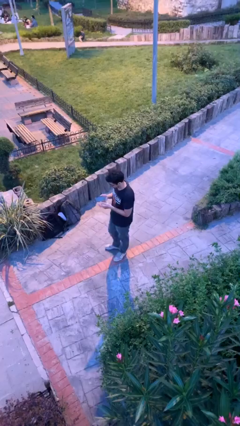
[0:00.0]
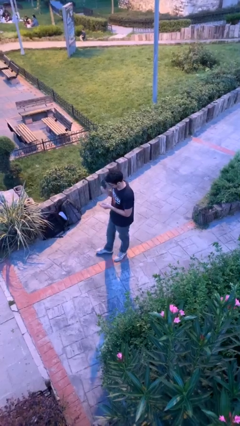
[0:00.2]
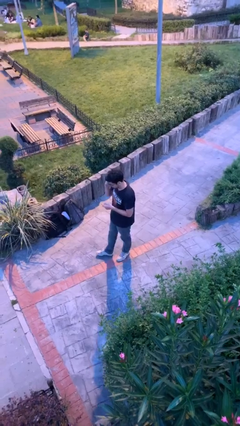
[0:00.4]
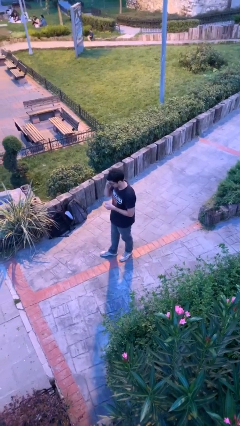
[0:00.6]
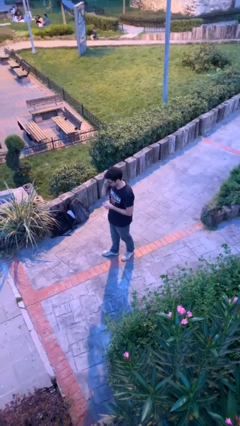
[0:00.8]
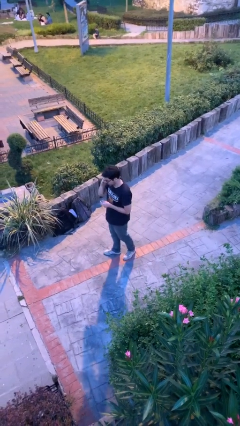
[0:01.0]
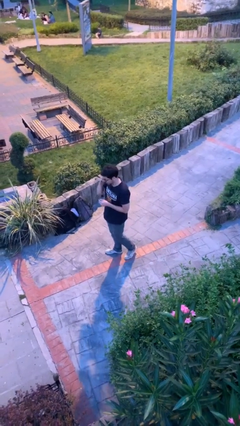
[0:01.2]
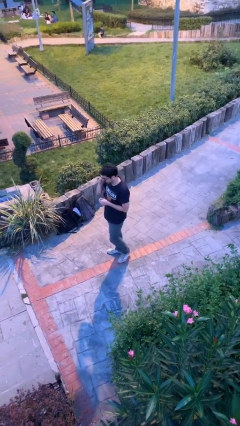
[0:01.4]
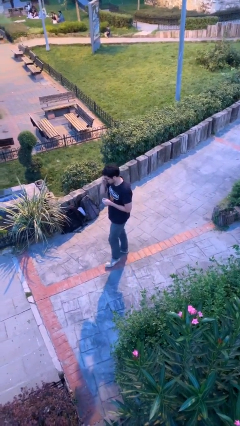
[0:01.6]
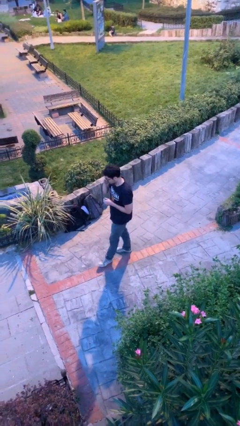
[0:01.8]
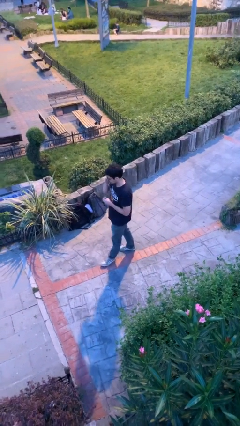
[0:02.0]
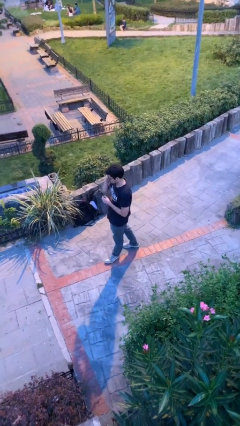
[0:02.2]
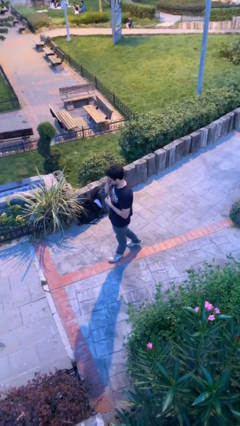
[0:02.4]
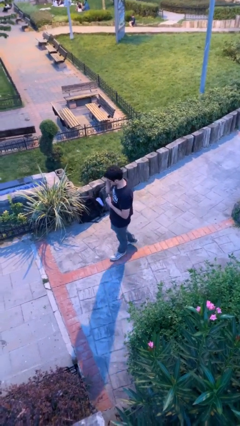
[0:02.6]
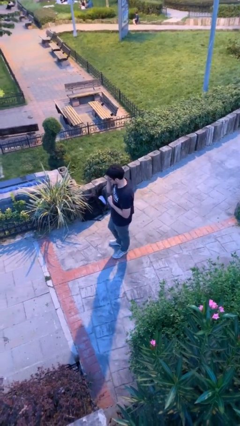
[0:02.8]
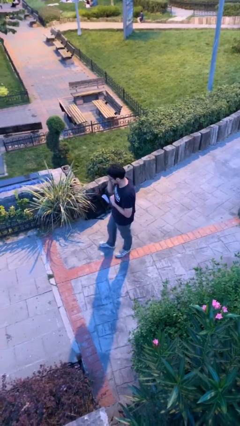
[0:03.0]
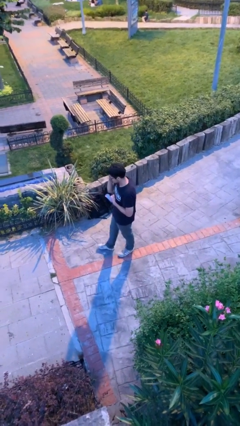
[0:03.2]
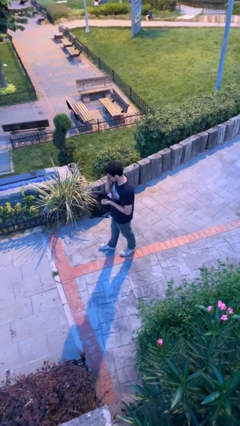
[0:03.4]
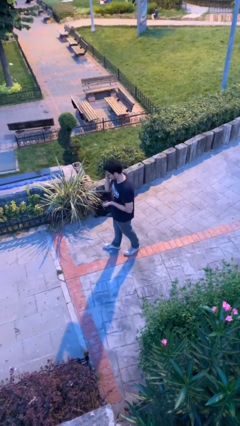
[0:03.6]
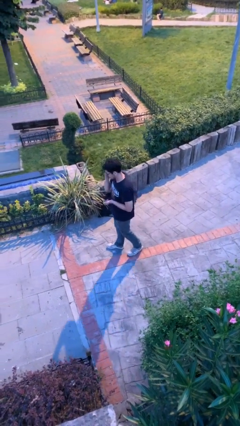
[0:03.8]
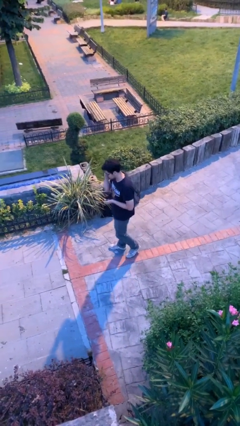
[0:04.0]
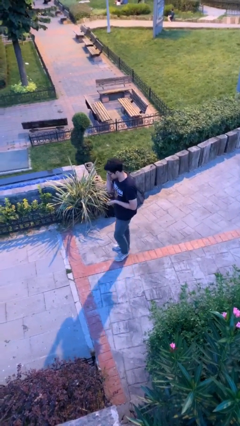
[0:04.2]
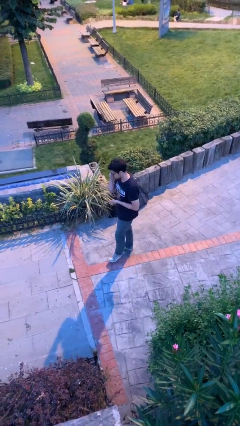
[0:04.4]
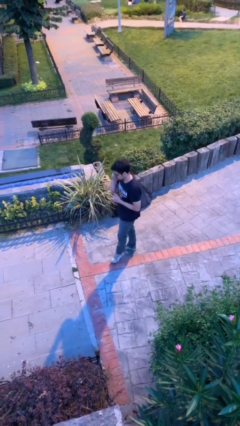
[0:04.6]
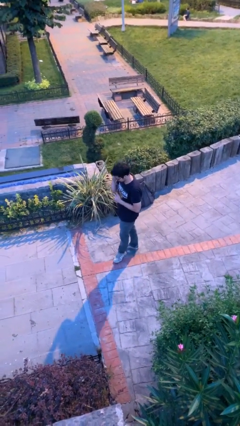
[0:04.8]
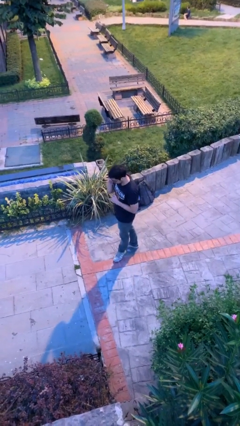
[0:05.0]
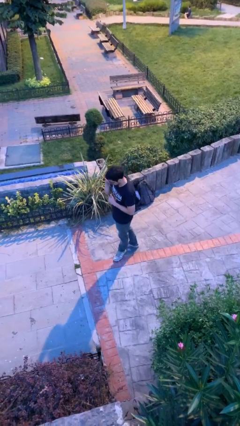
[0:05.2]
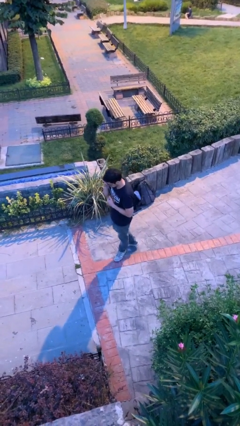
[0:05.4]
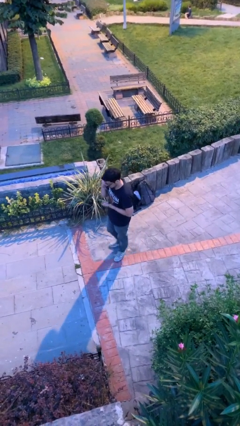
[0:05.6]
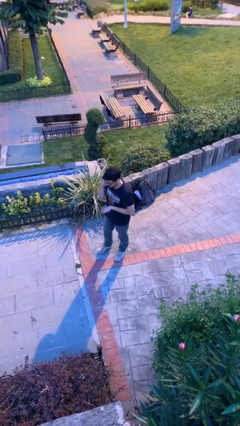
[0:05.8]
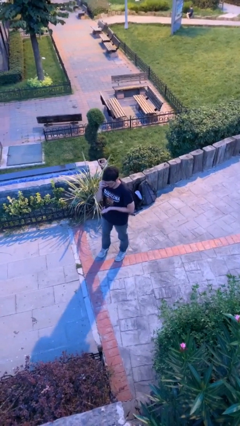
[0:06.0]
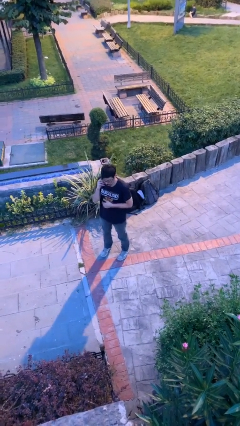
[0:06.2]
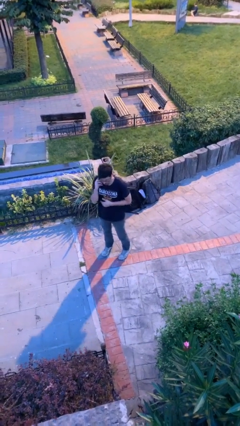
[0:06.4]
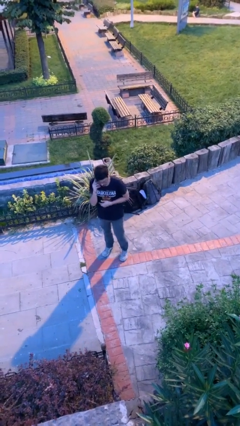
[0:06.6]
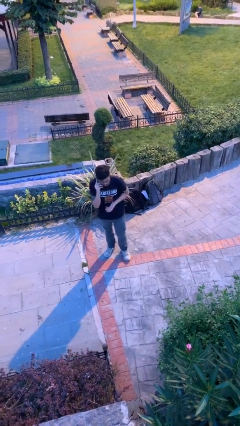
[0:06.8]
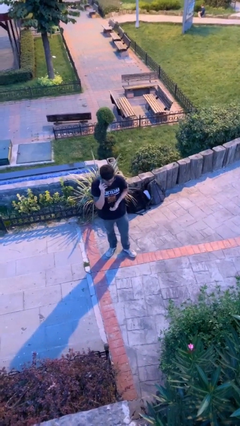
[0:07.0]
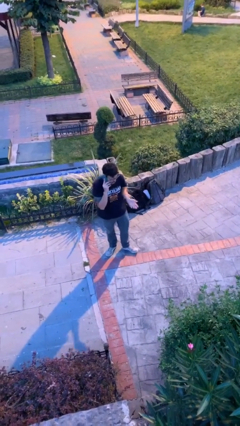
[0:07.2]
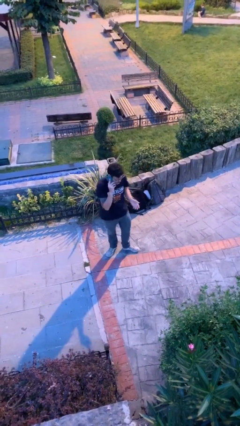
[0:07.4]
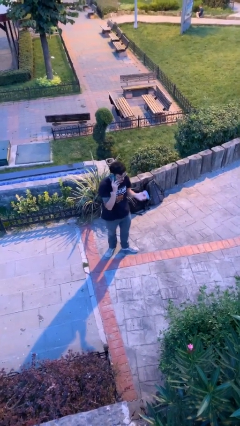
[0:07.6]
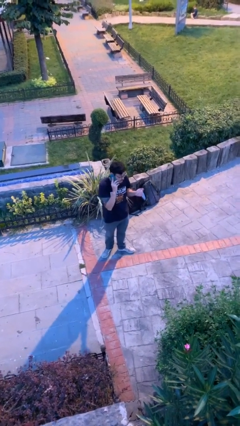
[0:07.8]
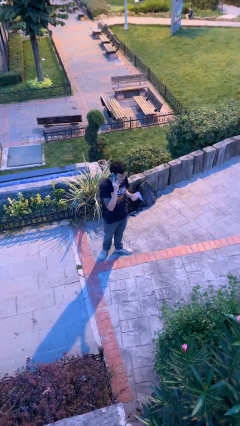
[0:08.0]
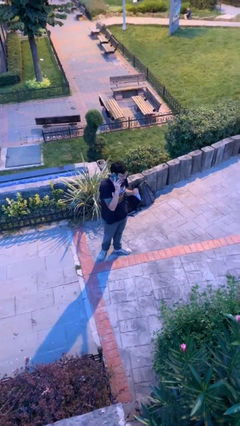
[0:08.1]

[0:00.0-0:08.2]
person talks on phone

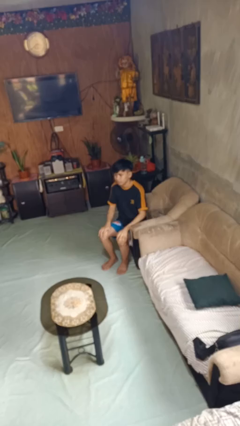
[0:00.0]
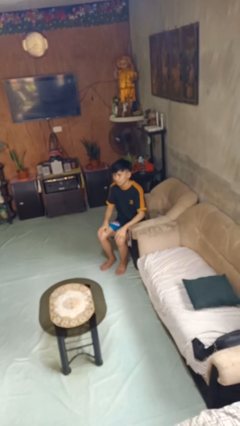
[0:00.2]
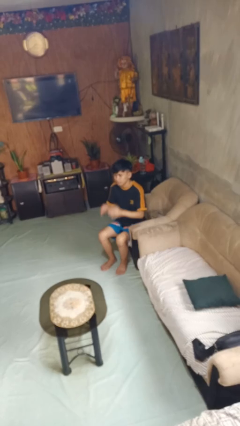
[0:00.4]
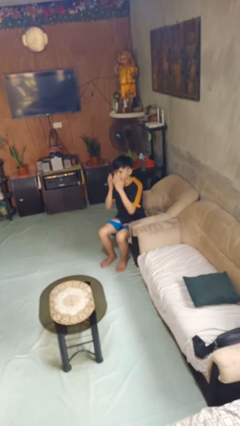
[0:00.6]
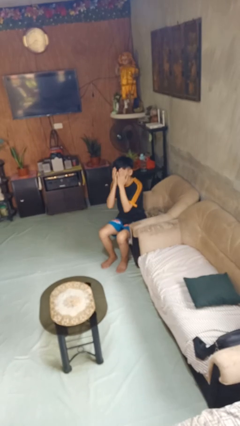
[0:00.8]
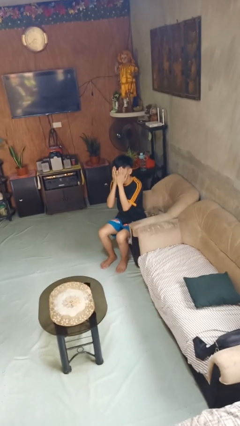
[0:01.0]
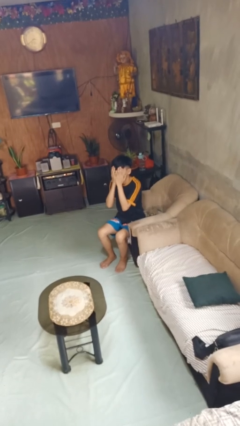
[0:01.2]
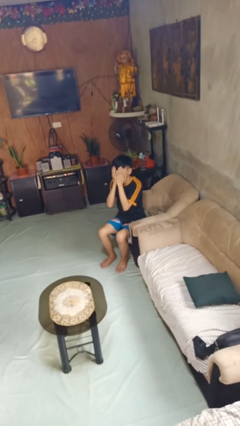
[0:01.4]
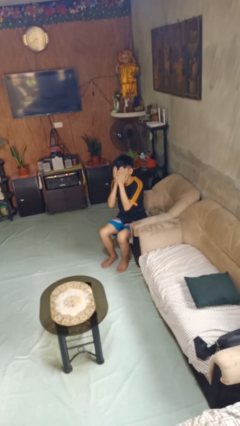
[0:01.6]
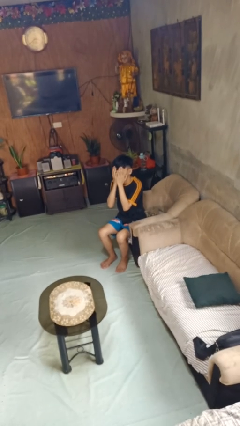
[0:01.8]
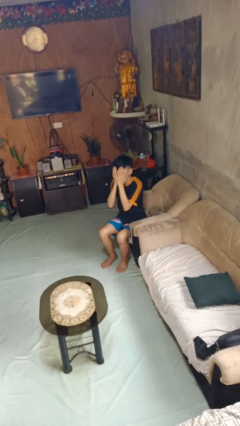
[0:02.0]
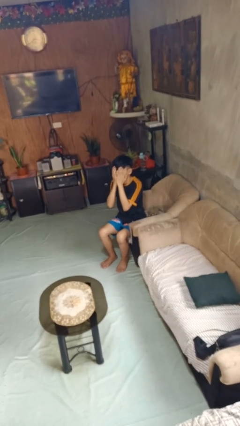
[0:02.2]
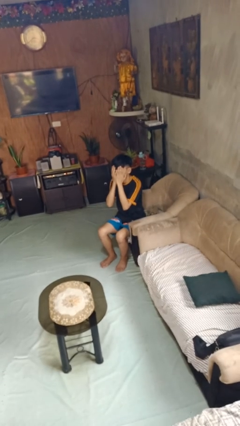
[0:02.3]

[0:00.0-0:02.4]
person covers face with hands

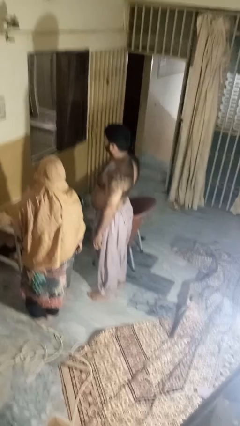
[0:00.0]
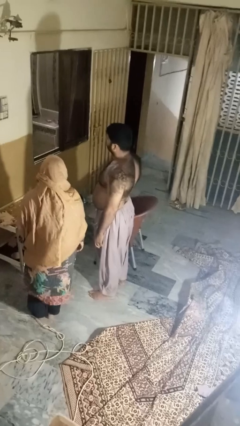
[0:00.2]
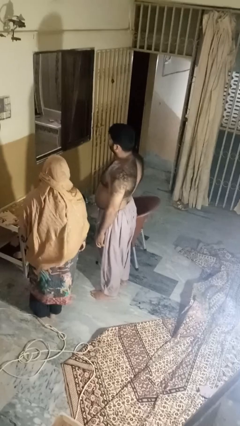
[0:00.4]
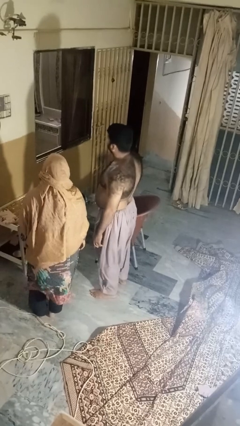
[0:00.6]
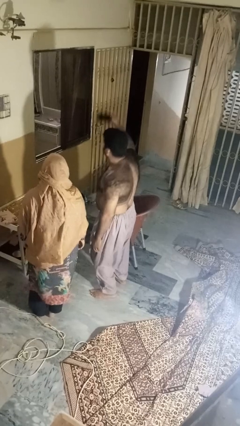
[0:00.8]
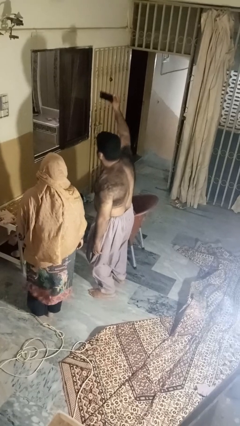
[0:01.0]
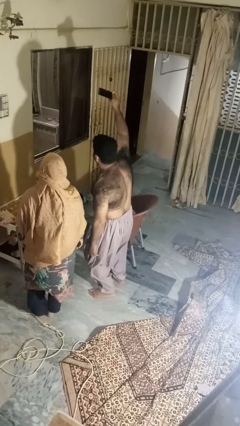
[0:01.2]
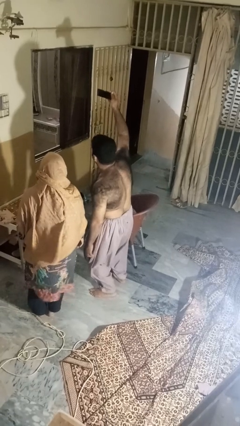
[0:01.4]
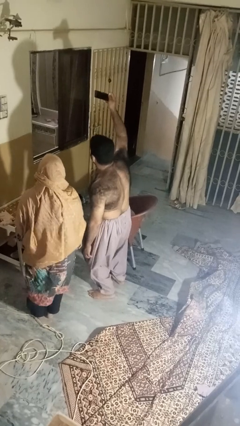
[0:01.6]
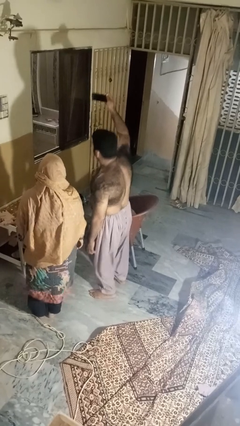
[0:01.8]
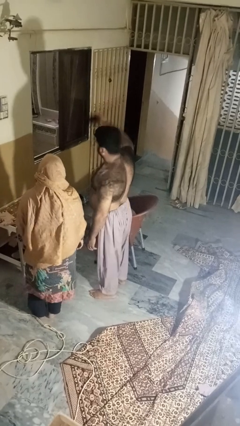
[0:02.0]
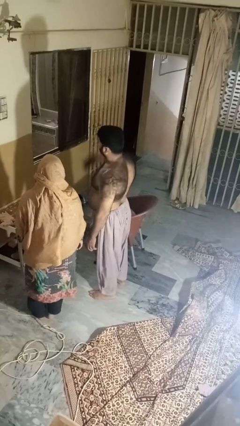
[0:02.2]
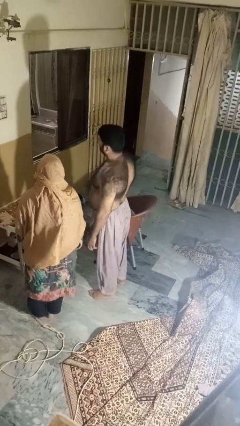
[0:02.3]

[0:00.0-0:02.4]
person takes selfie with person

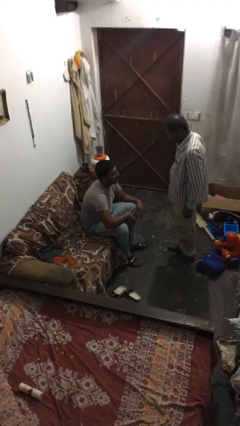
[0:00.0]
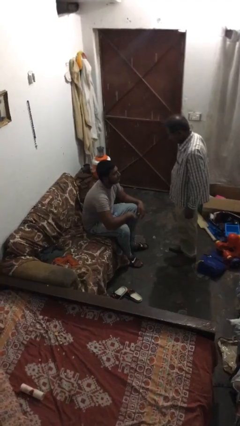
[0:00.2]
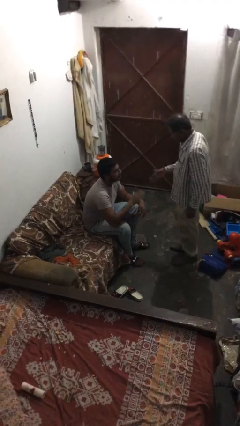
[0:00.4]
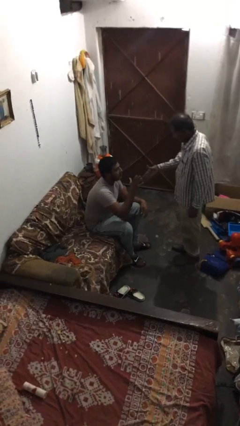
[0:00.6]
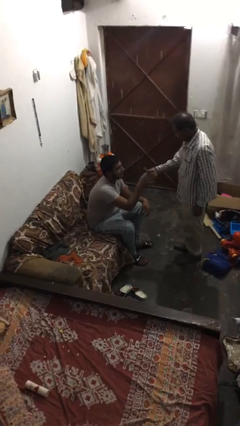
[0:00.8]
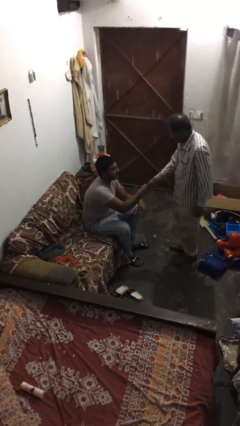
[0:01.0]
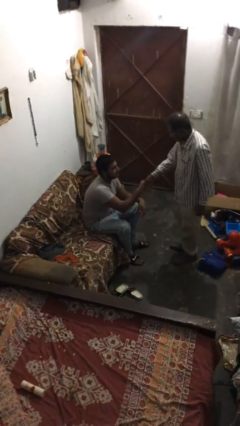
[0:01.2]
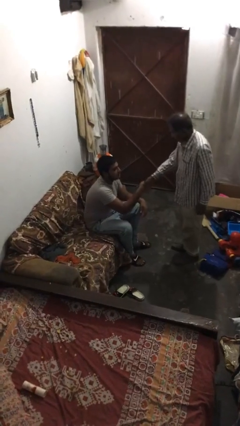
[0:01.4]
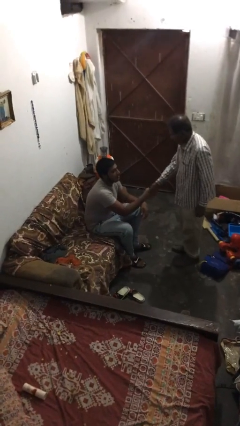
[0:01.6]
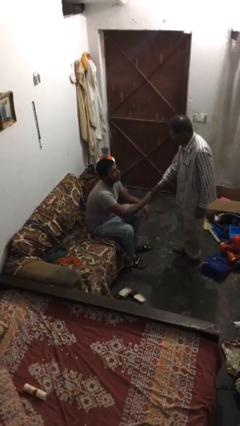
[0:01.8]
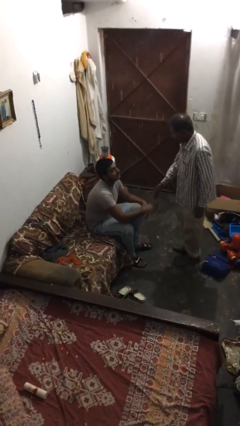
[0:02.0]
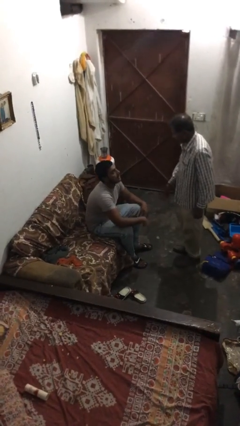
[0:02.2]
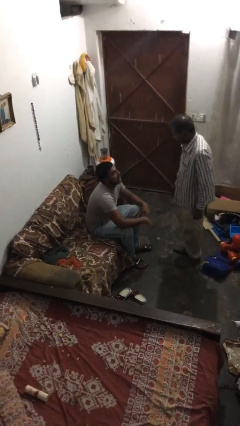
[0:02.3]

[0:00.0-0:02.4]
person shakes hand

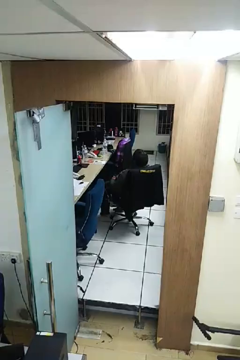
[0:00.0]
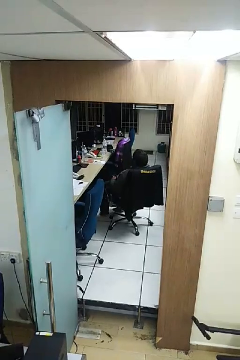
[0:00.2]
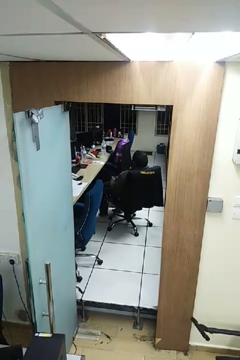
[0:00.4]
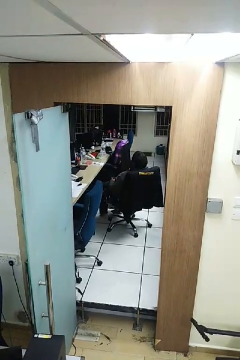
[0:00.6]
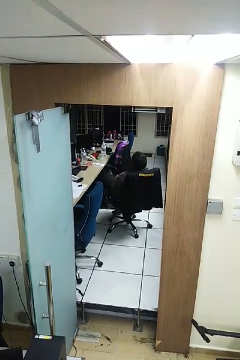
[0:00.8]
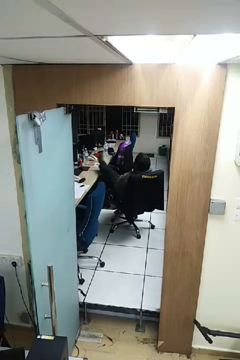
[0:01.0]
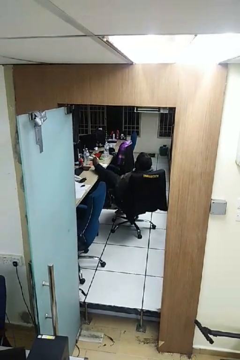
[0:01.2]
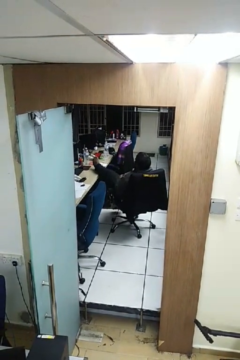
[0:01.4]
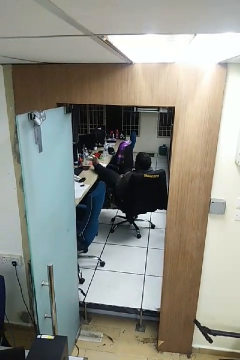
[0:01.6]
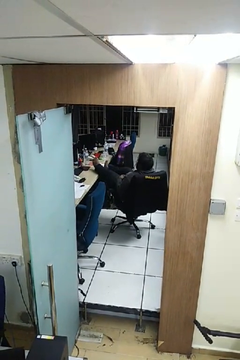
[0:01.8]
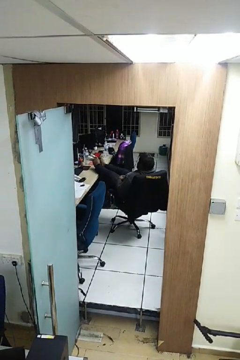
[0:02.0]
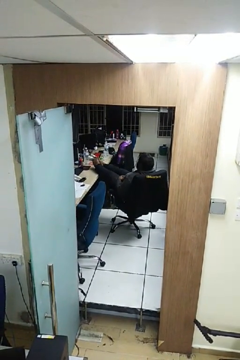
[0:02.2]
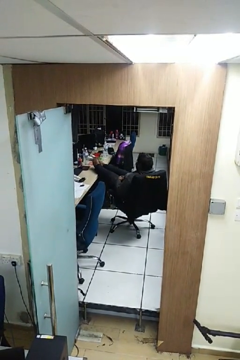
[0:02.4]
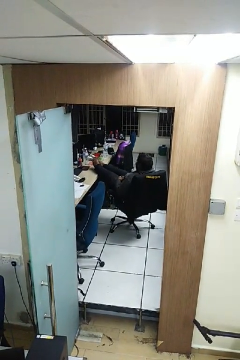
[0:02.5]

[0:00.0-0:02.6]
person puts feet up

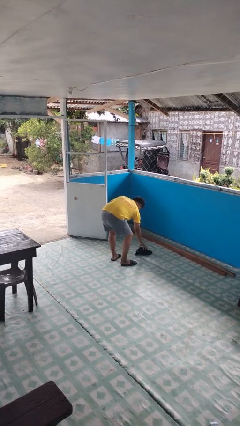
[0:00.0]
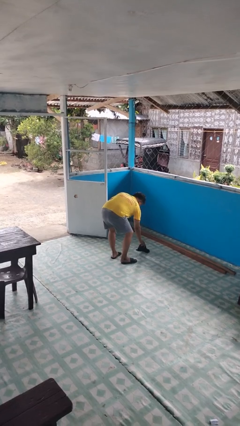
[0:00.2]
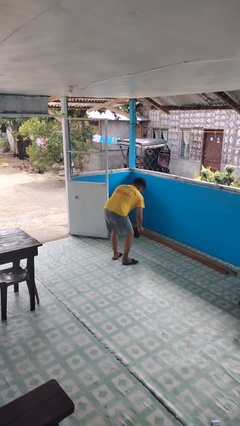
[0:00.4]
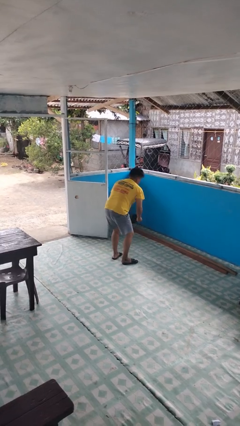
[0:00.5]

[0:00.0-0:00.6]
person picks up object from floor
